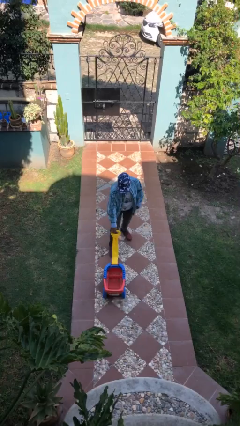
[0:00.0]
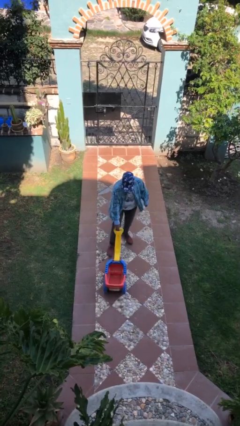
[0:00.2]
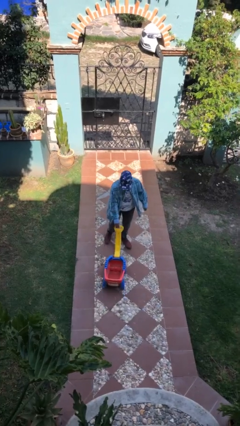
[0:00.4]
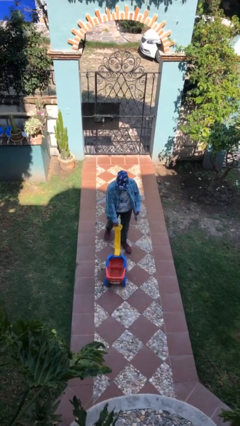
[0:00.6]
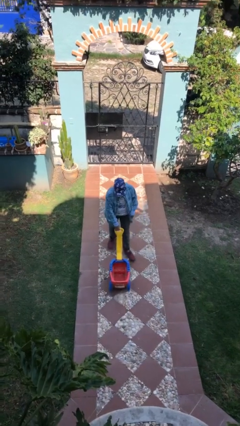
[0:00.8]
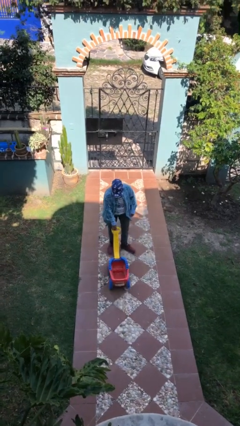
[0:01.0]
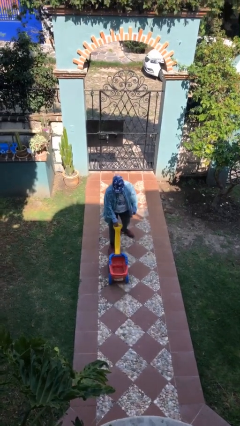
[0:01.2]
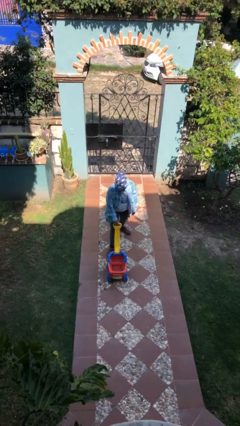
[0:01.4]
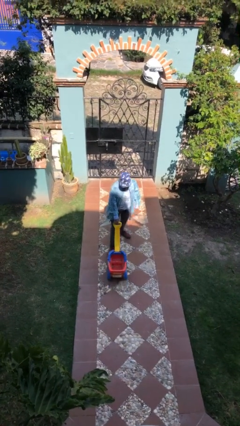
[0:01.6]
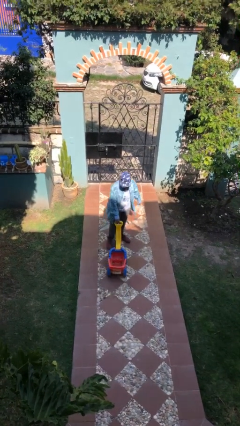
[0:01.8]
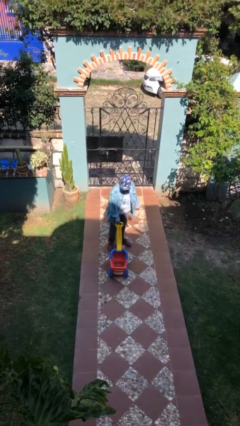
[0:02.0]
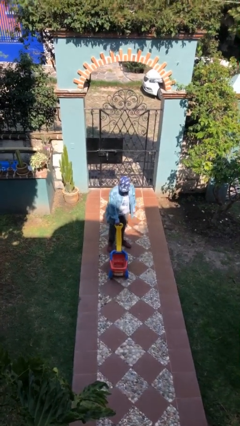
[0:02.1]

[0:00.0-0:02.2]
person pulls wheeled cart

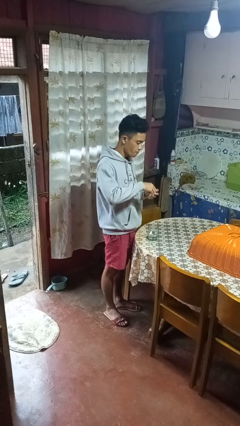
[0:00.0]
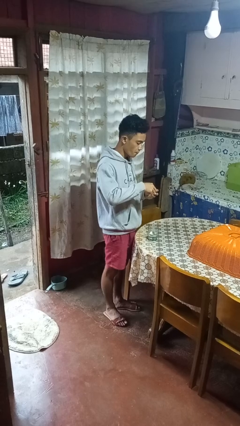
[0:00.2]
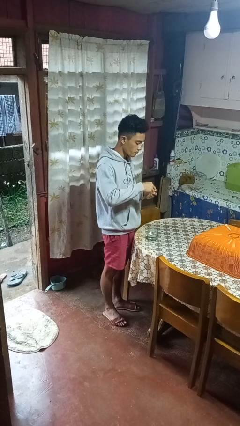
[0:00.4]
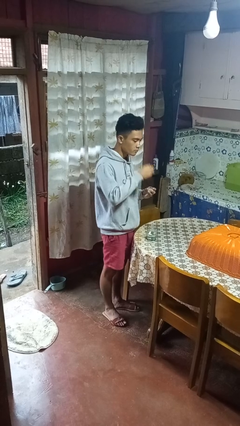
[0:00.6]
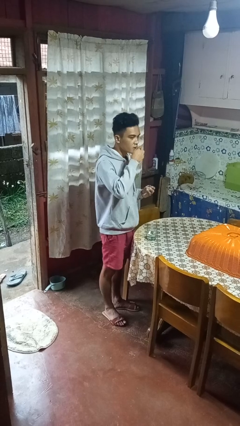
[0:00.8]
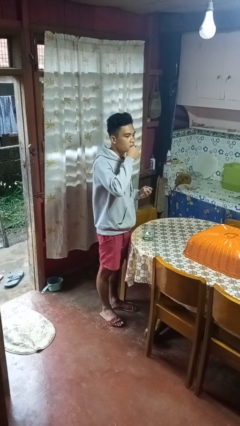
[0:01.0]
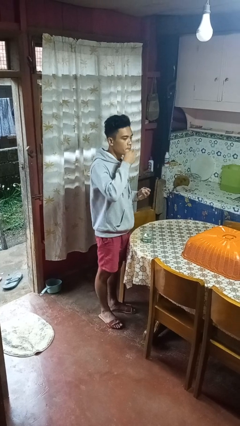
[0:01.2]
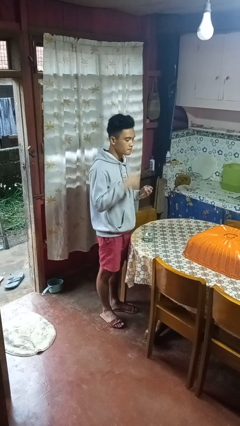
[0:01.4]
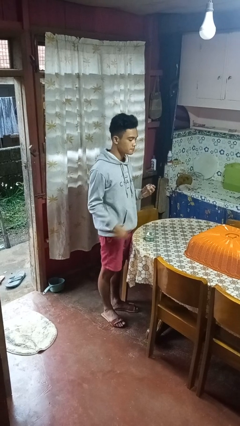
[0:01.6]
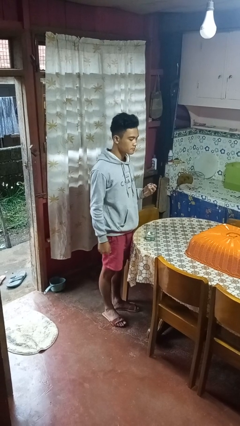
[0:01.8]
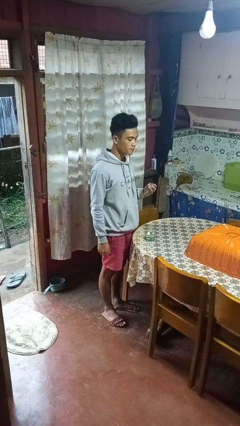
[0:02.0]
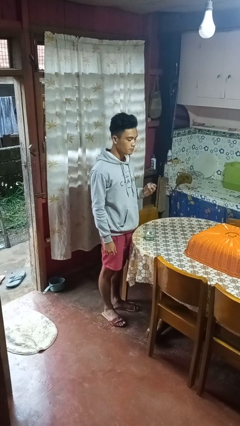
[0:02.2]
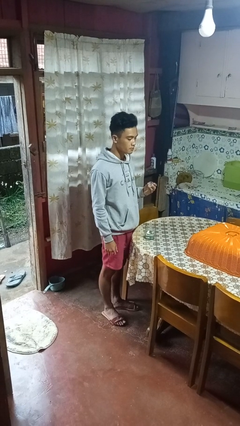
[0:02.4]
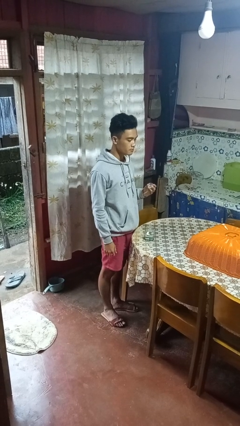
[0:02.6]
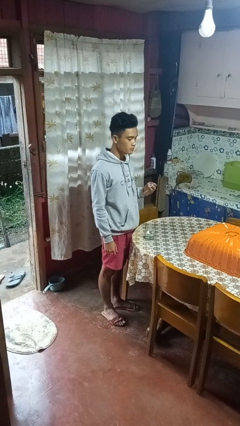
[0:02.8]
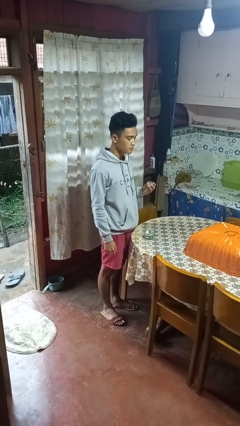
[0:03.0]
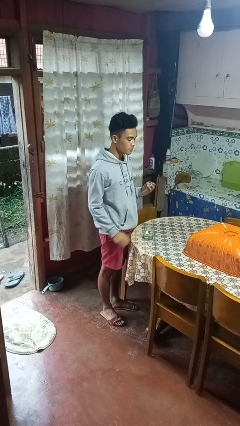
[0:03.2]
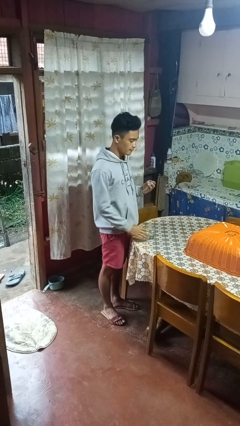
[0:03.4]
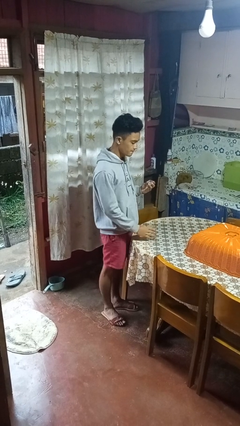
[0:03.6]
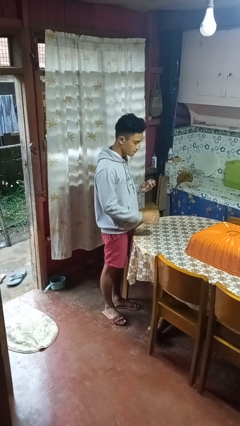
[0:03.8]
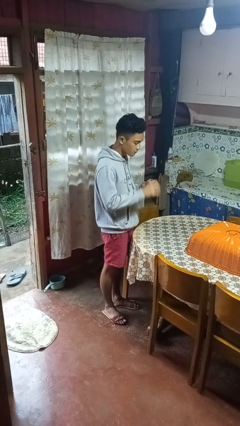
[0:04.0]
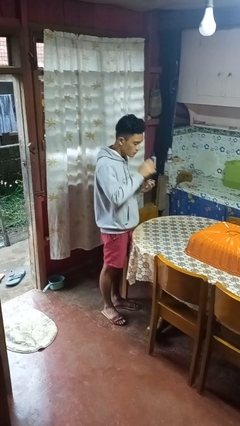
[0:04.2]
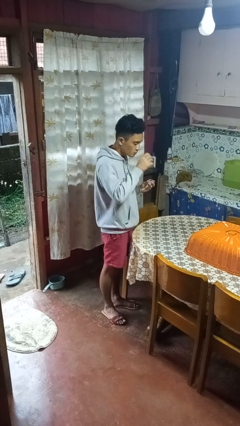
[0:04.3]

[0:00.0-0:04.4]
person takes medicine pills

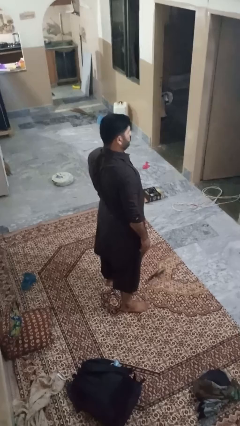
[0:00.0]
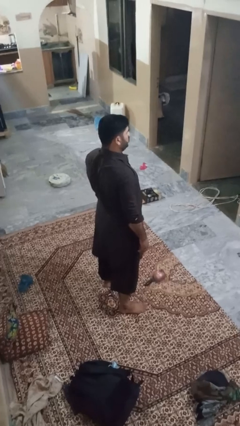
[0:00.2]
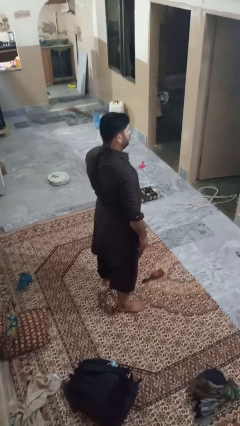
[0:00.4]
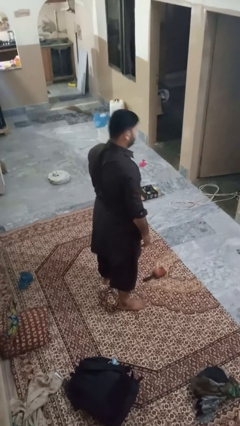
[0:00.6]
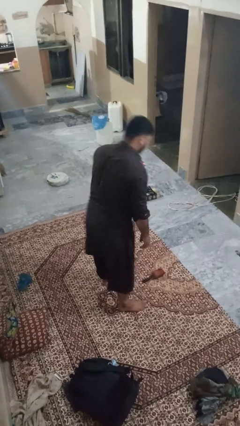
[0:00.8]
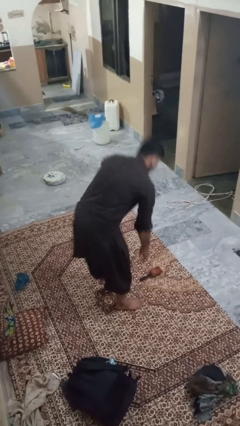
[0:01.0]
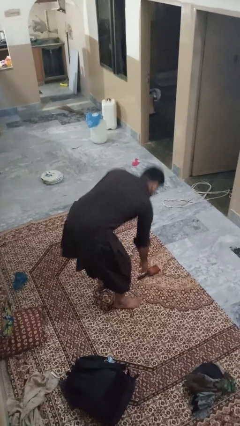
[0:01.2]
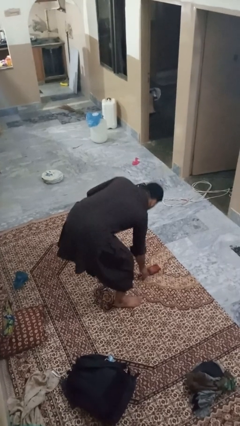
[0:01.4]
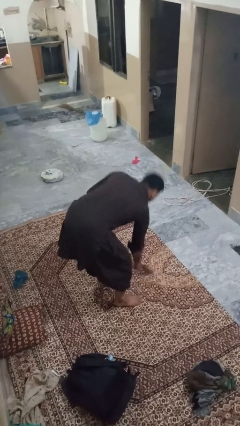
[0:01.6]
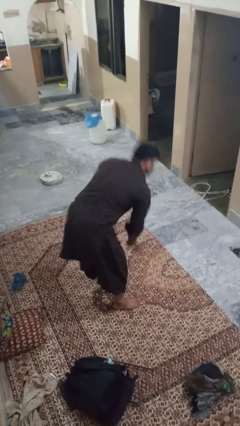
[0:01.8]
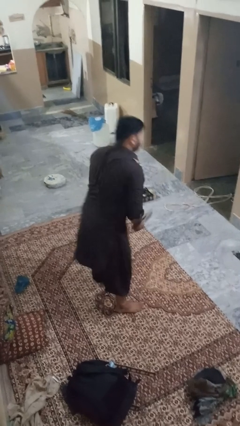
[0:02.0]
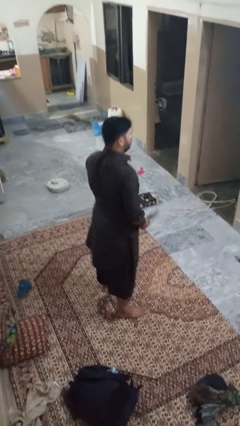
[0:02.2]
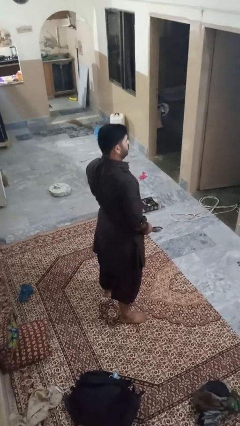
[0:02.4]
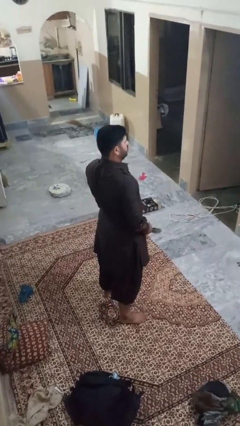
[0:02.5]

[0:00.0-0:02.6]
person picks up object from floor

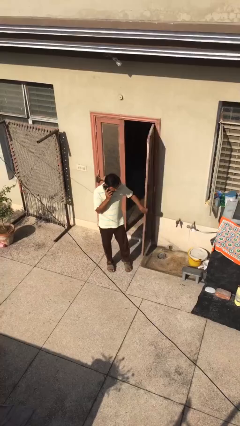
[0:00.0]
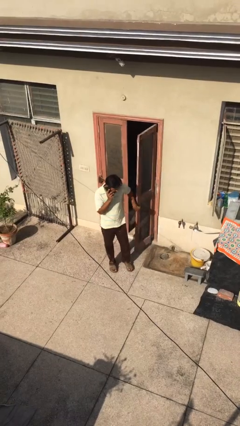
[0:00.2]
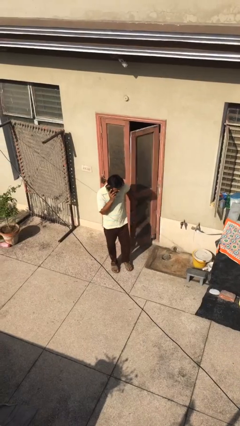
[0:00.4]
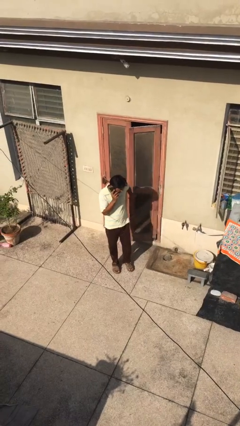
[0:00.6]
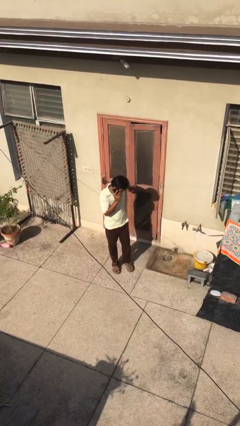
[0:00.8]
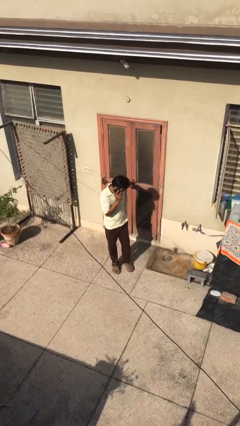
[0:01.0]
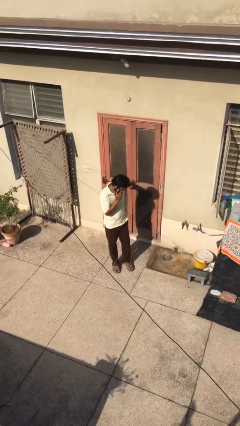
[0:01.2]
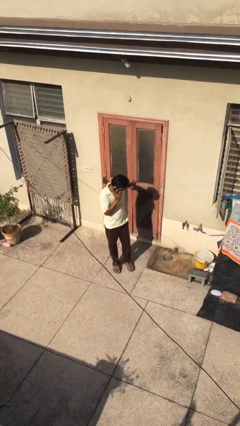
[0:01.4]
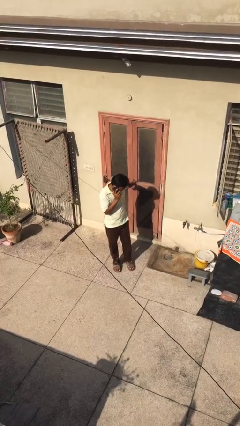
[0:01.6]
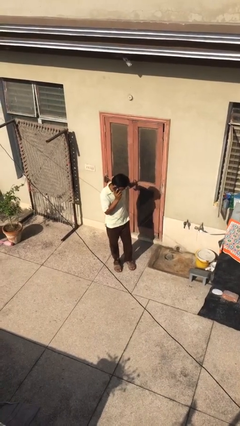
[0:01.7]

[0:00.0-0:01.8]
person closes facility door

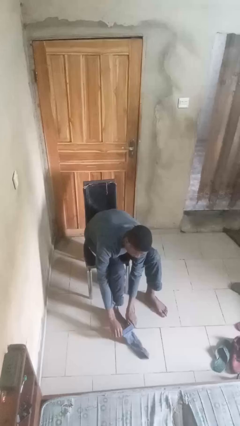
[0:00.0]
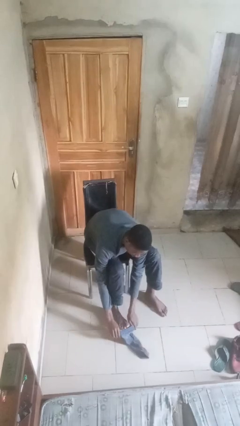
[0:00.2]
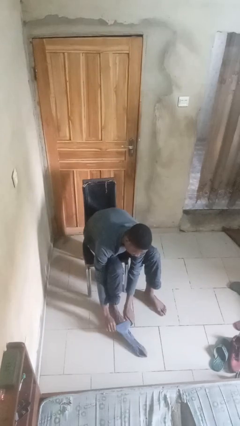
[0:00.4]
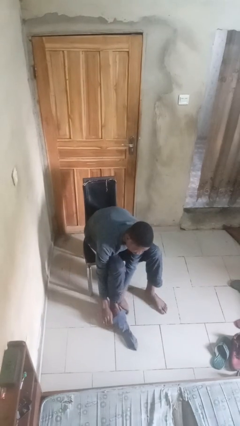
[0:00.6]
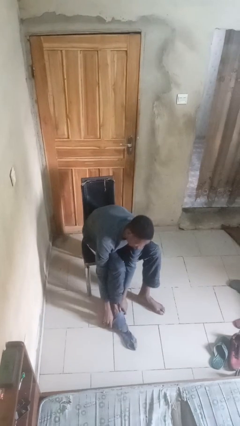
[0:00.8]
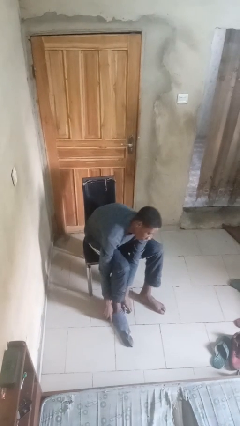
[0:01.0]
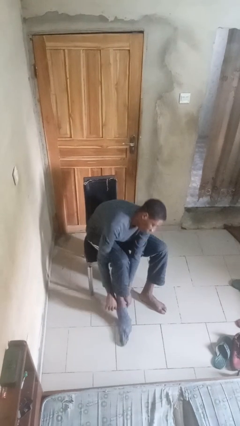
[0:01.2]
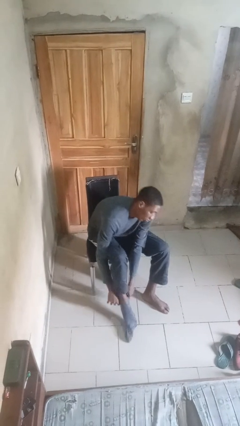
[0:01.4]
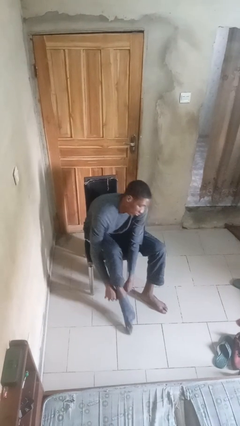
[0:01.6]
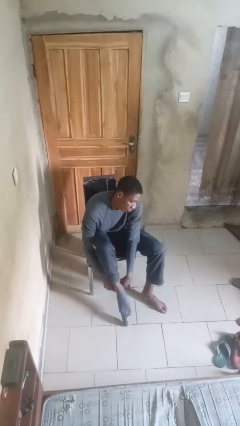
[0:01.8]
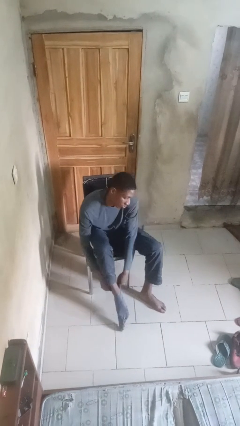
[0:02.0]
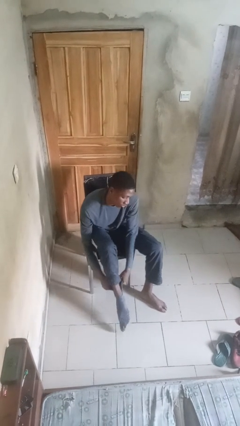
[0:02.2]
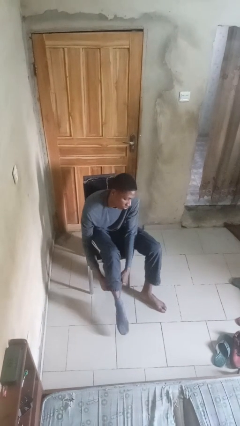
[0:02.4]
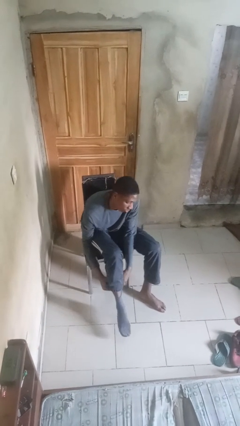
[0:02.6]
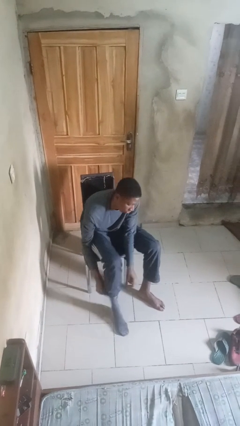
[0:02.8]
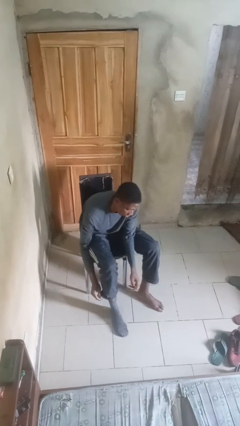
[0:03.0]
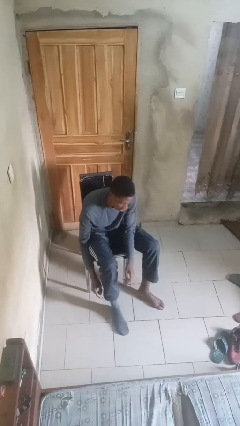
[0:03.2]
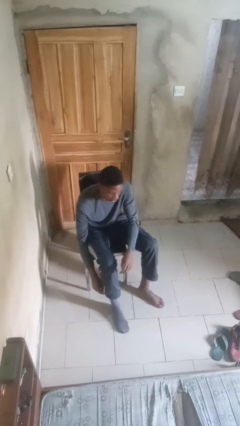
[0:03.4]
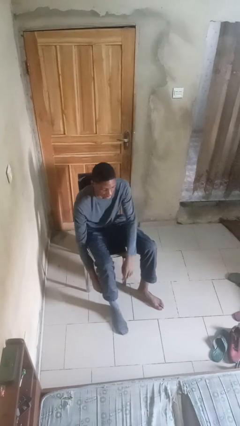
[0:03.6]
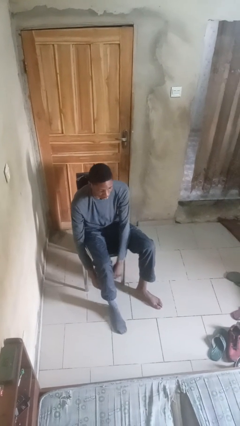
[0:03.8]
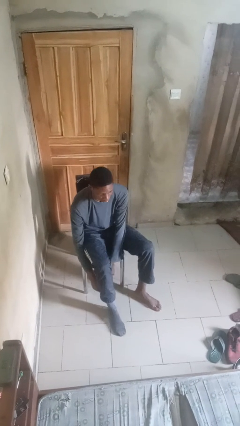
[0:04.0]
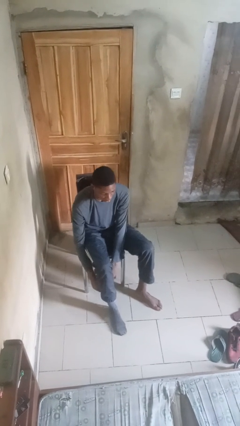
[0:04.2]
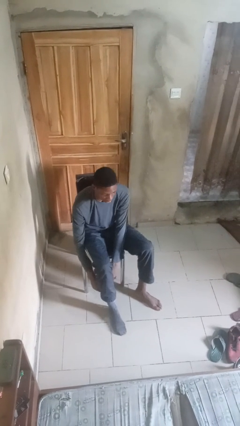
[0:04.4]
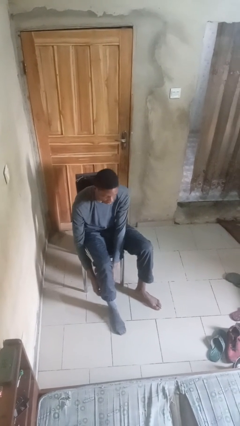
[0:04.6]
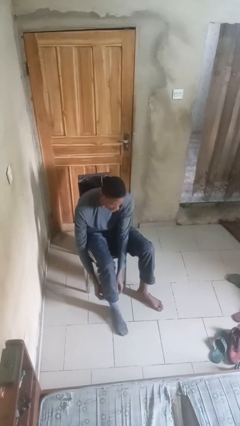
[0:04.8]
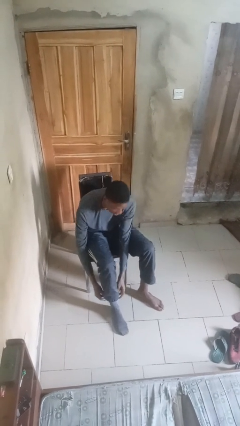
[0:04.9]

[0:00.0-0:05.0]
person puts on socks

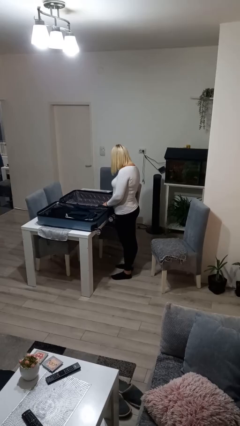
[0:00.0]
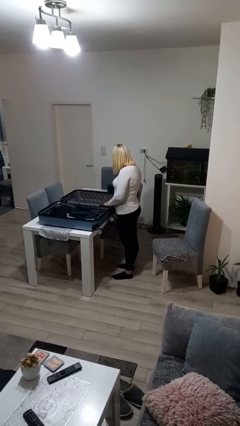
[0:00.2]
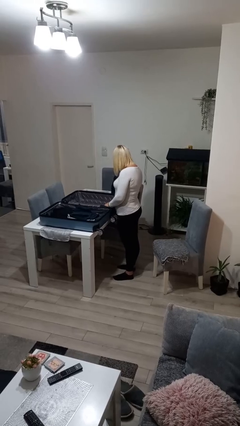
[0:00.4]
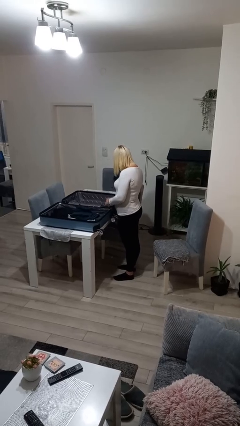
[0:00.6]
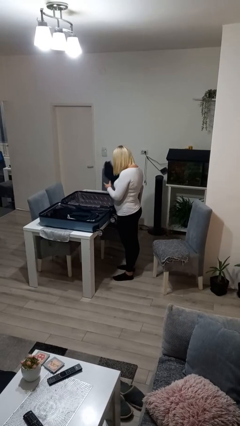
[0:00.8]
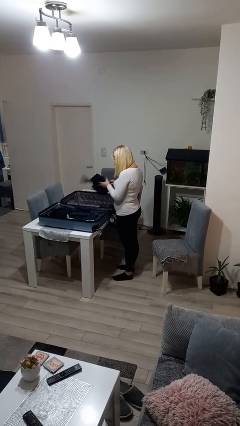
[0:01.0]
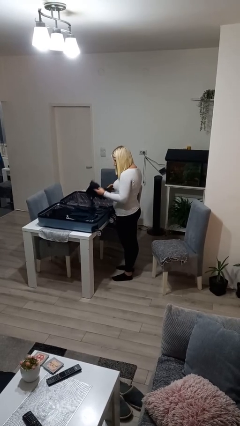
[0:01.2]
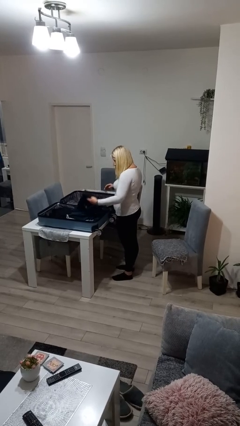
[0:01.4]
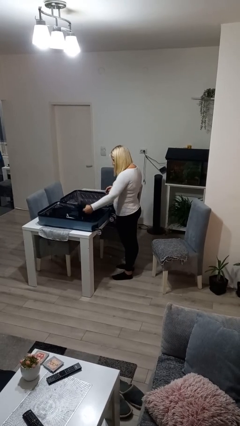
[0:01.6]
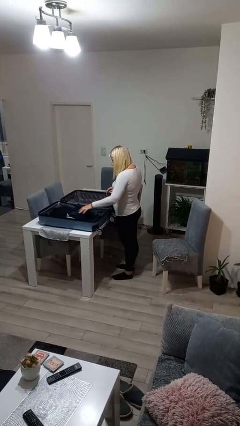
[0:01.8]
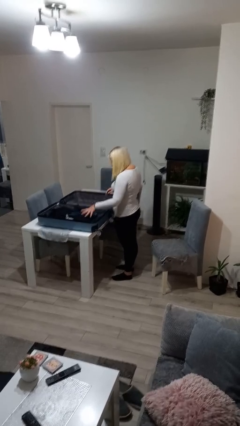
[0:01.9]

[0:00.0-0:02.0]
person loads clothes into suitcase
